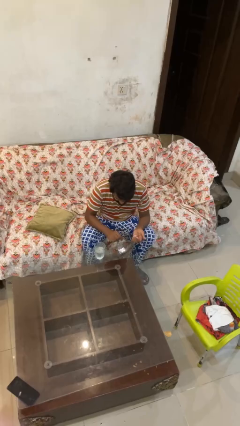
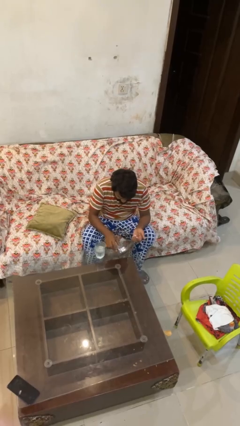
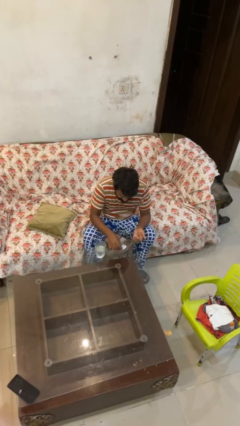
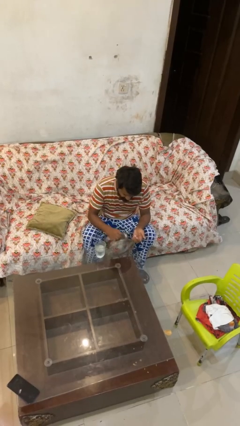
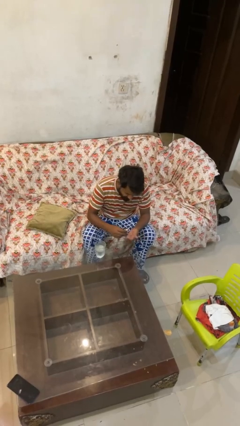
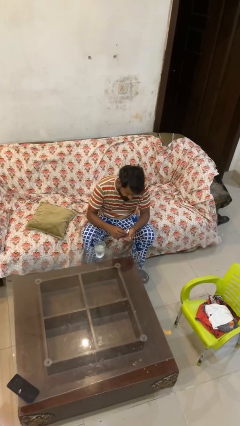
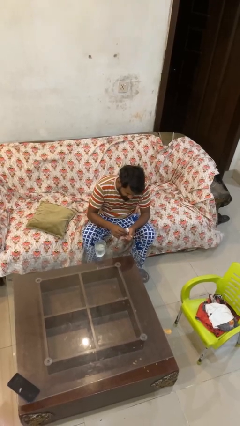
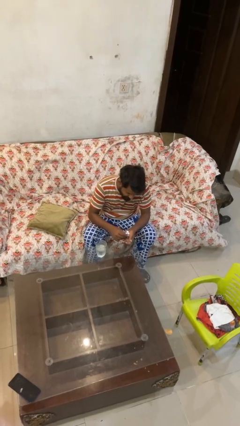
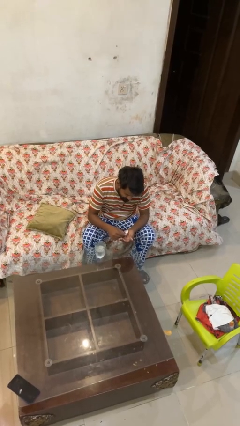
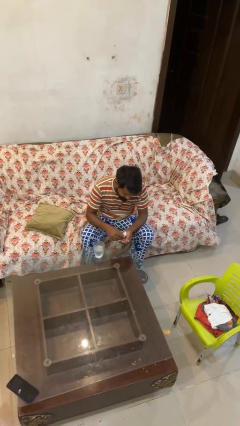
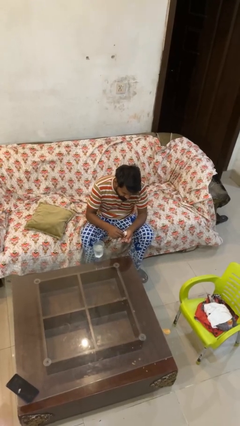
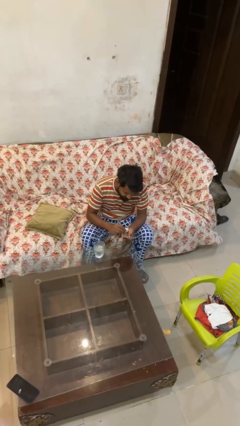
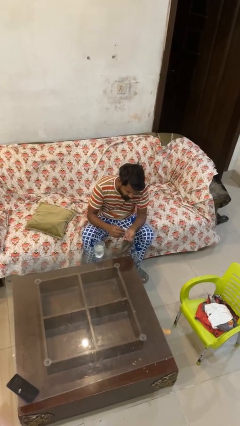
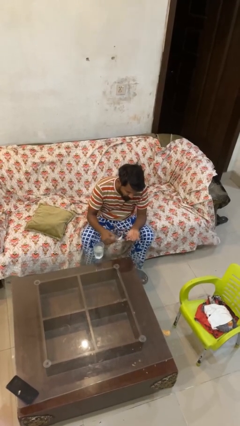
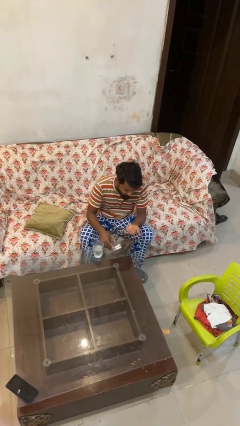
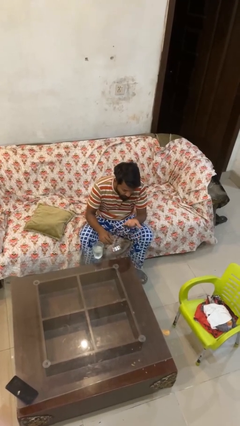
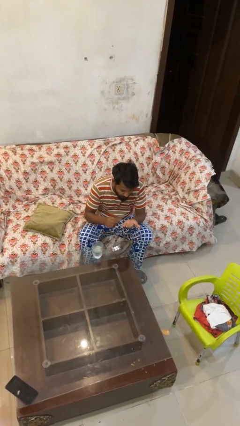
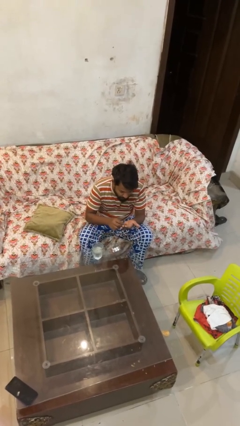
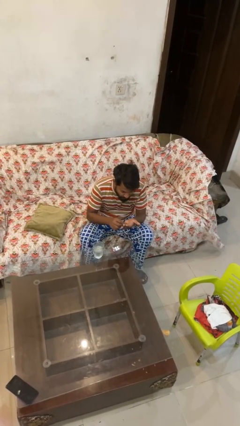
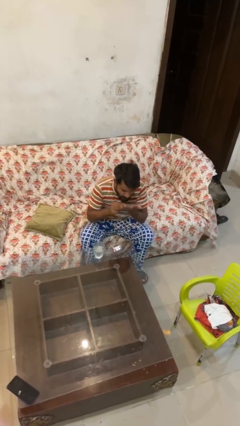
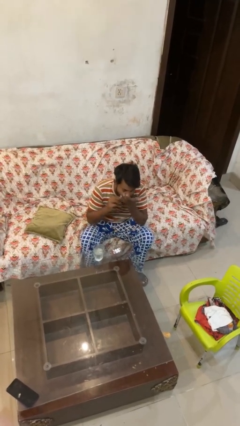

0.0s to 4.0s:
person takes medicine pills

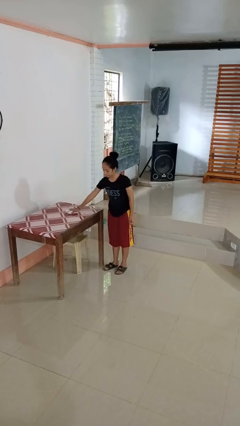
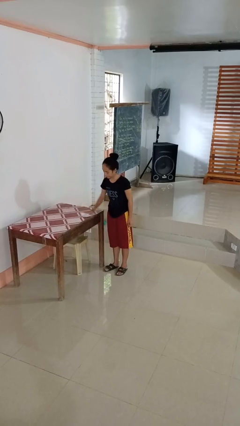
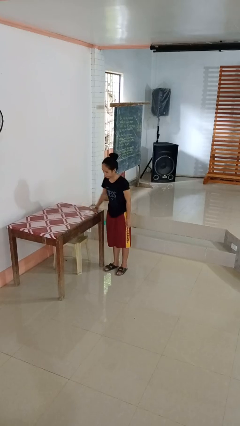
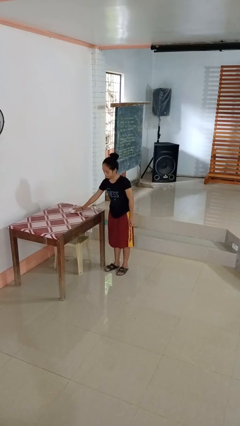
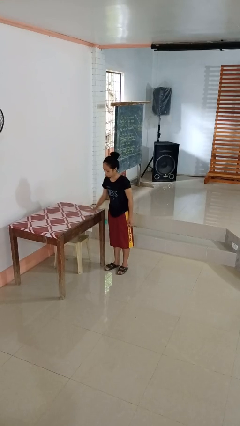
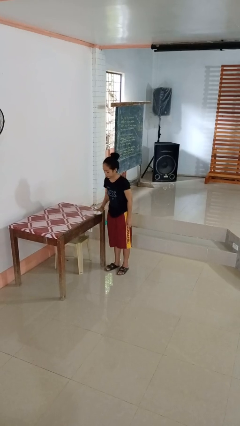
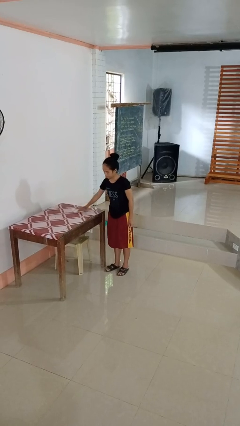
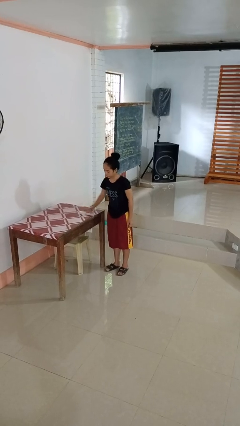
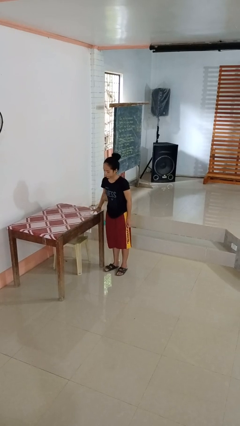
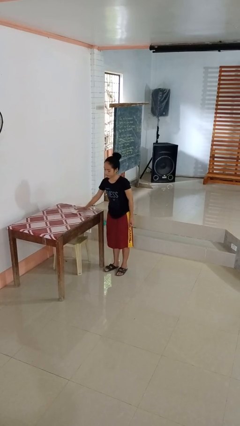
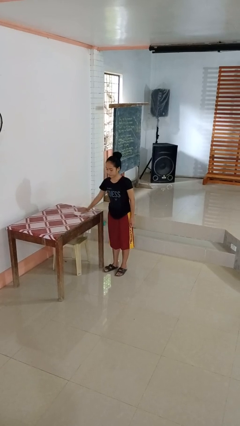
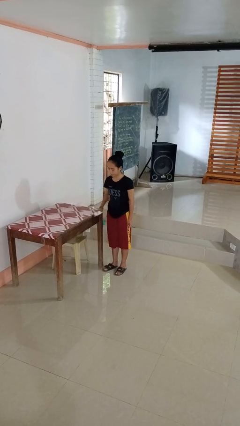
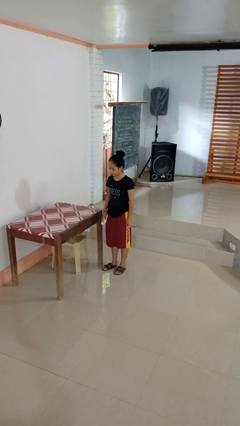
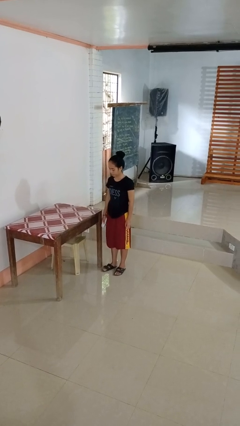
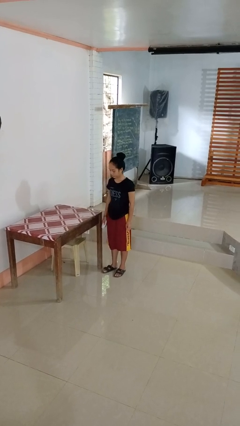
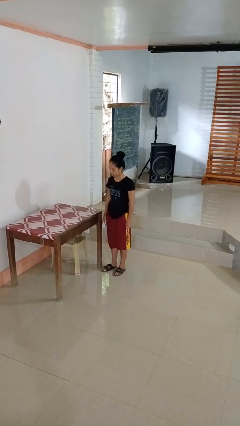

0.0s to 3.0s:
person cleans table with rag

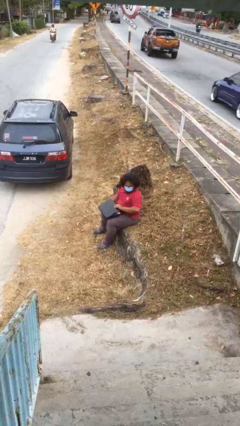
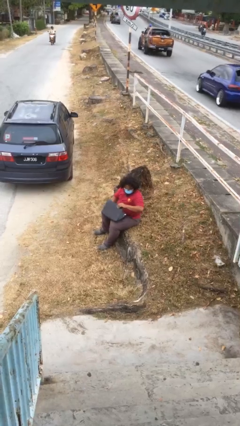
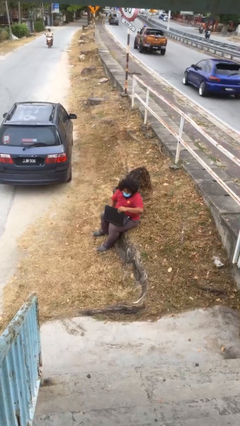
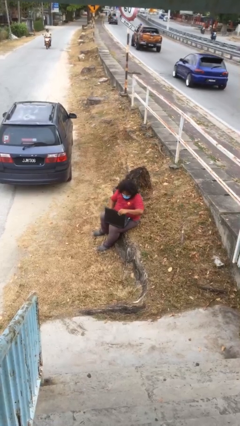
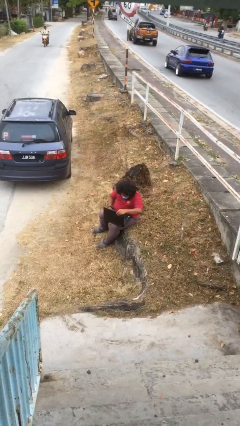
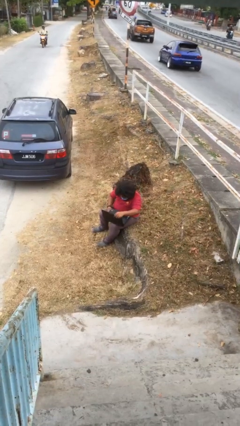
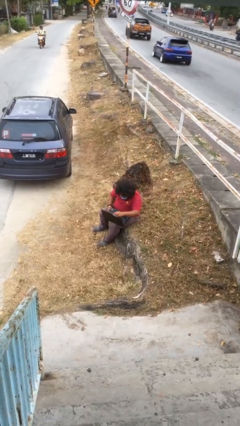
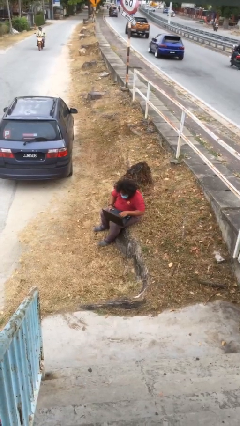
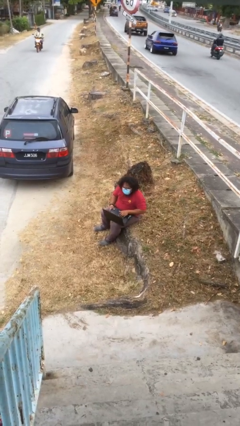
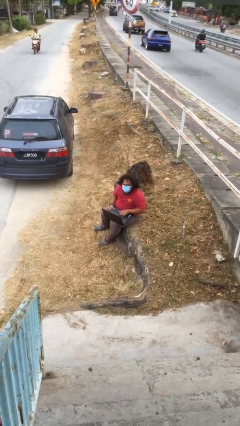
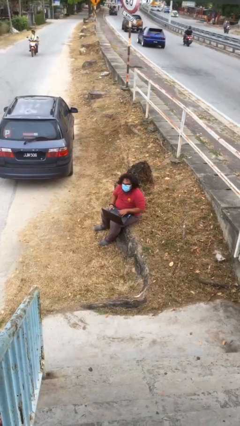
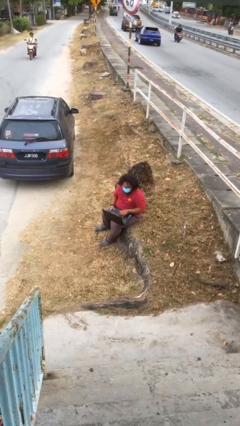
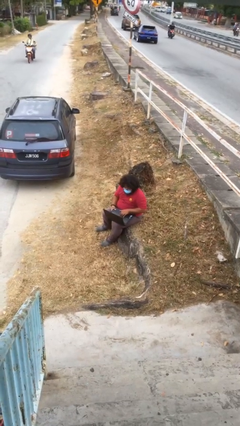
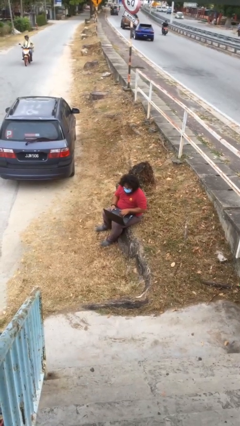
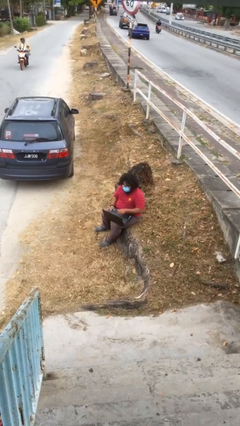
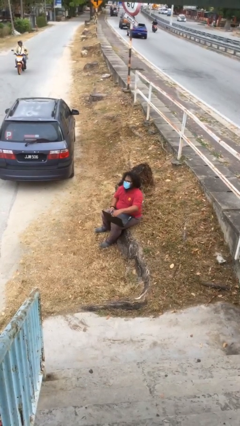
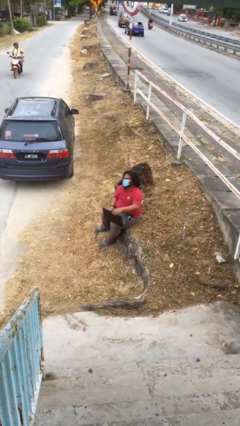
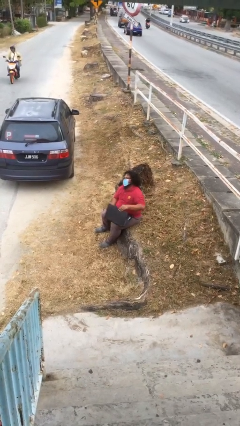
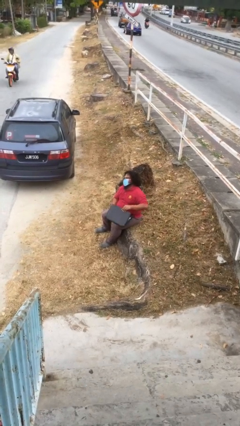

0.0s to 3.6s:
person interacts with laptop

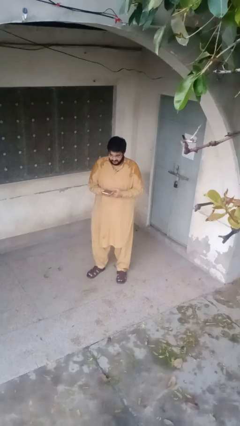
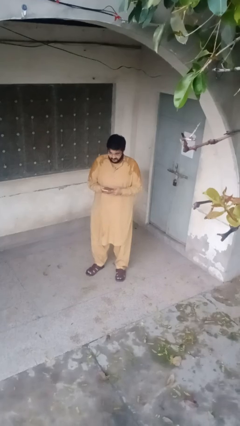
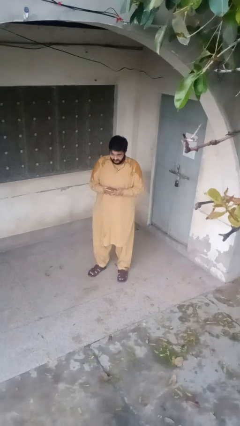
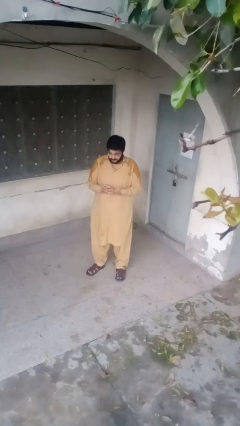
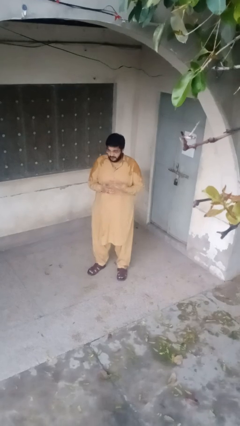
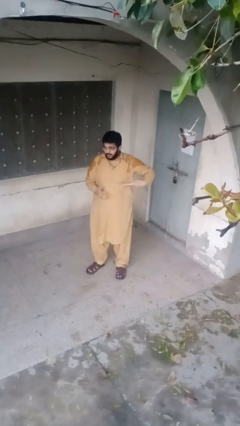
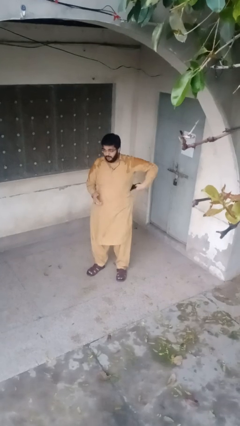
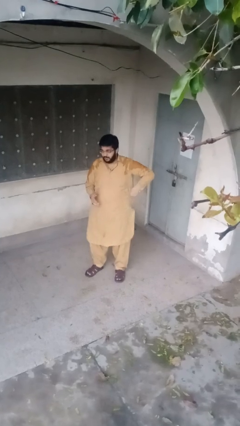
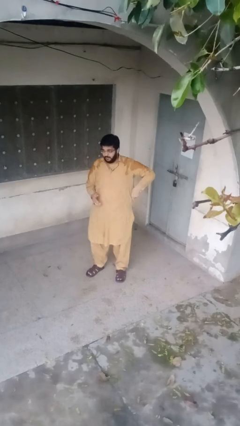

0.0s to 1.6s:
person puts phone into pocket

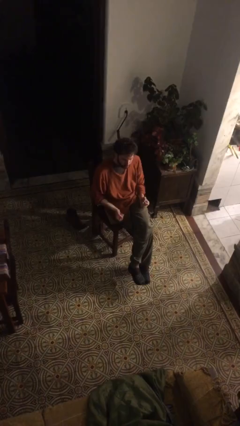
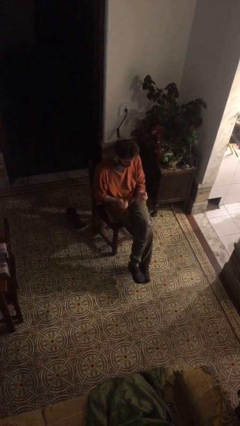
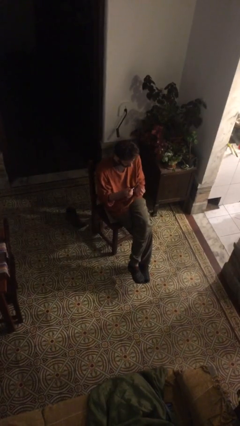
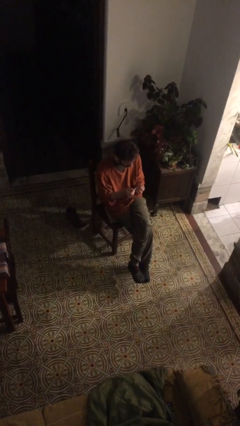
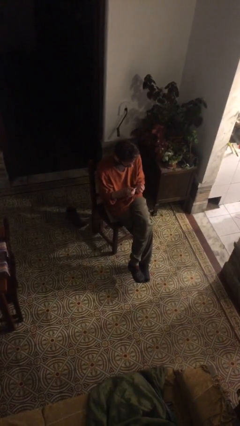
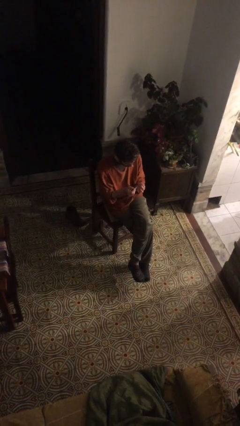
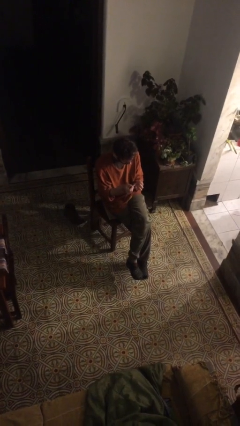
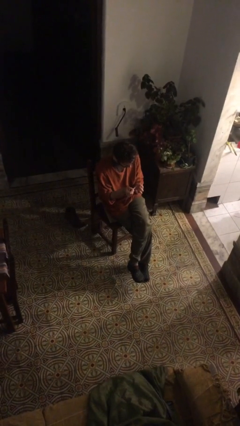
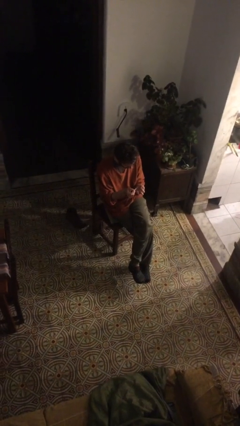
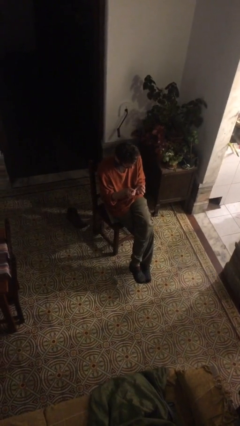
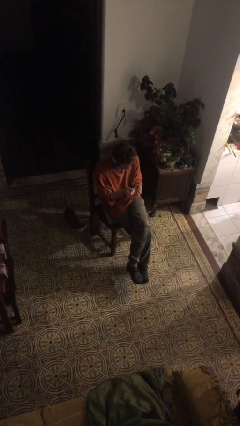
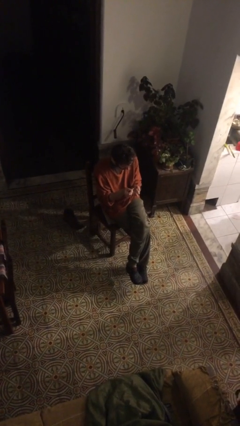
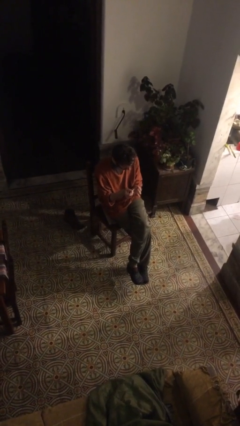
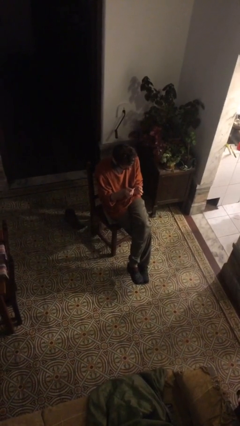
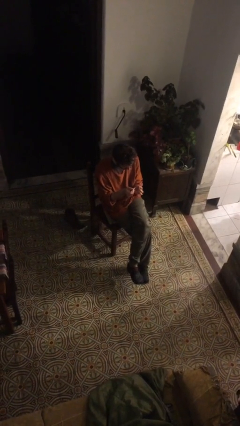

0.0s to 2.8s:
person files fingernails

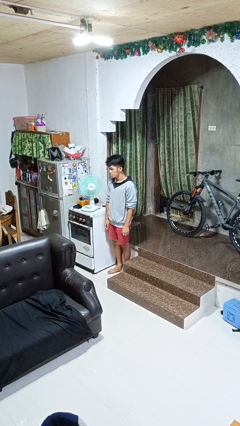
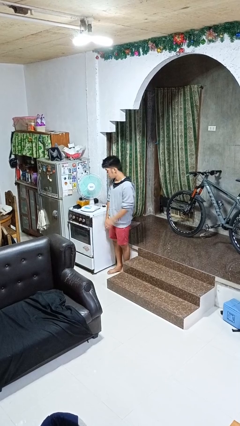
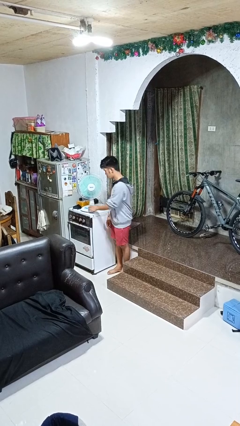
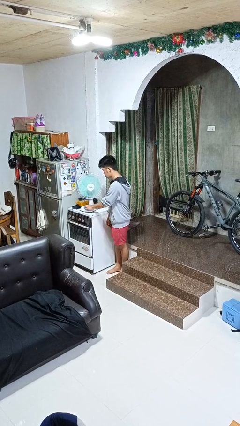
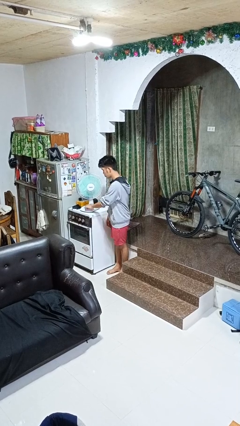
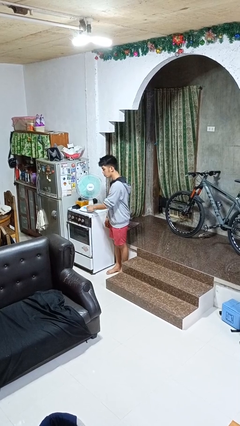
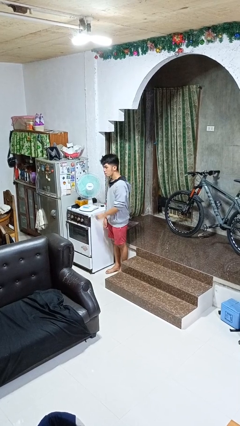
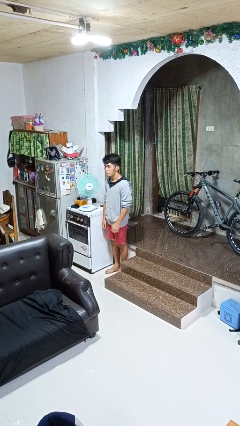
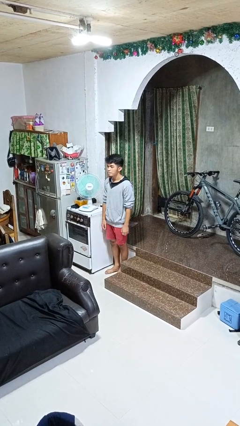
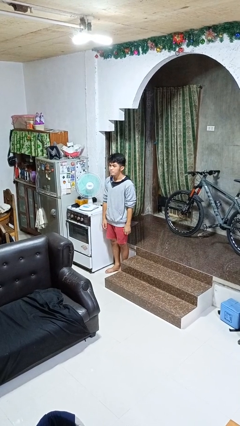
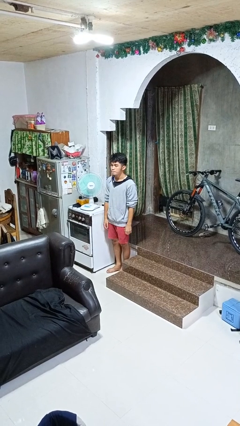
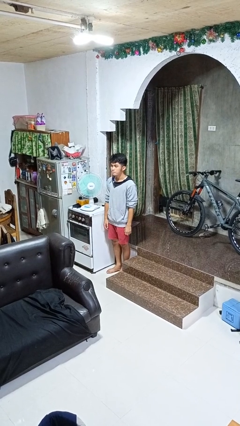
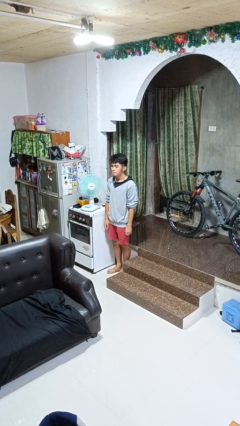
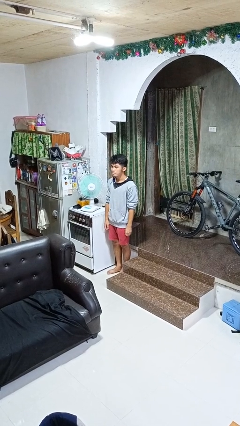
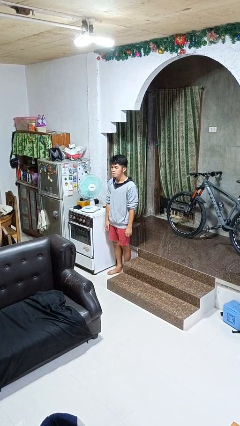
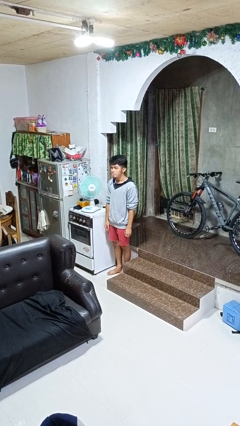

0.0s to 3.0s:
person turns on fan
